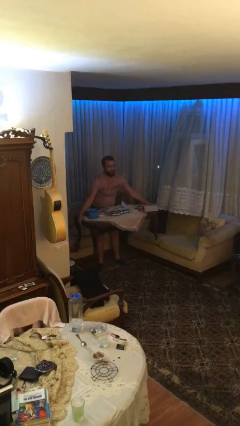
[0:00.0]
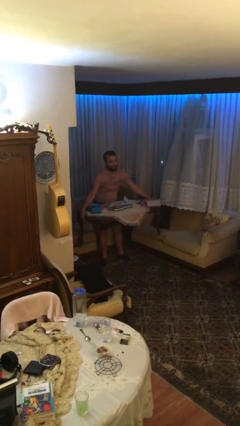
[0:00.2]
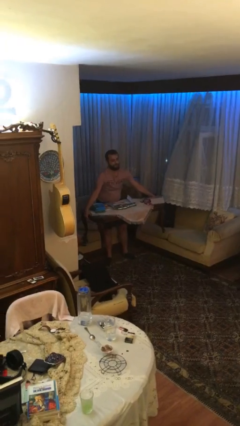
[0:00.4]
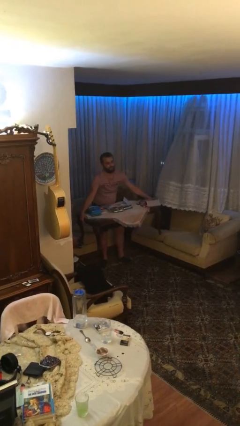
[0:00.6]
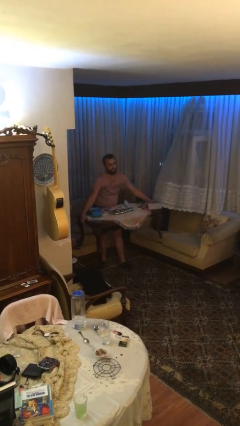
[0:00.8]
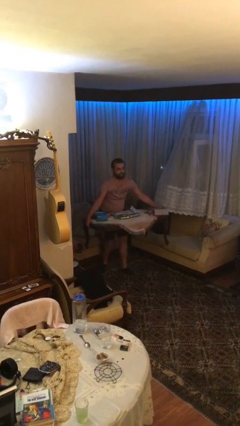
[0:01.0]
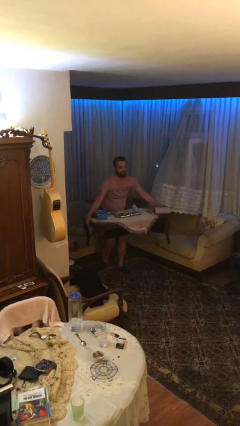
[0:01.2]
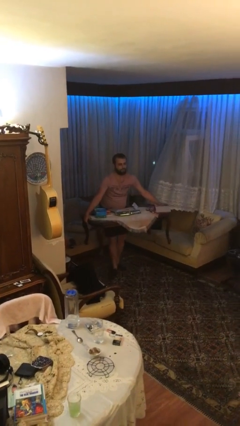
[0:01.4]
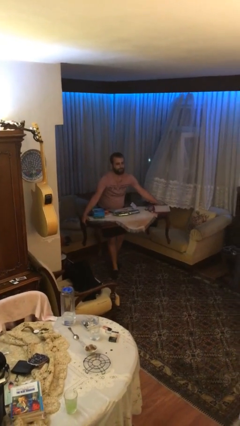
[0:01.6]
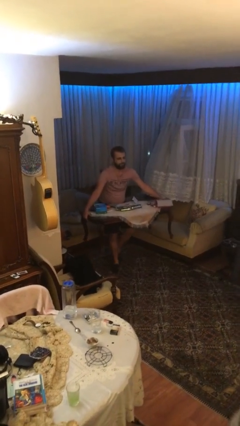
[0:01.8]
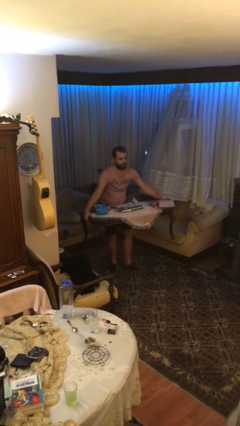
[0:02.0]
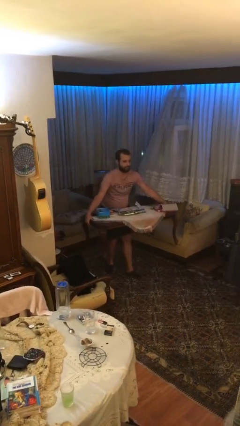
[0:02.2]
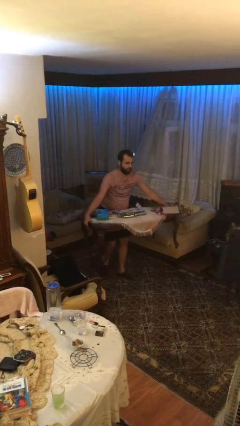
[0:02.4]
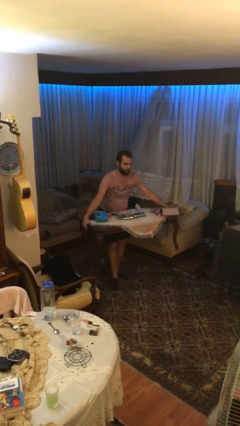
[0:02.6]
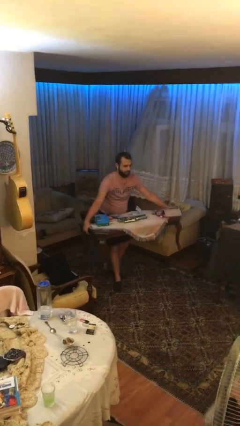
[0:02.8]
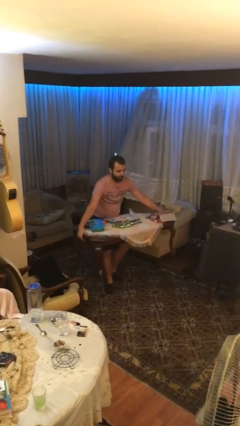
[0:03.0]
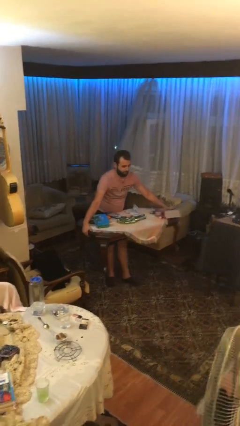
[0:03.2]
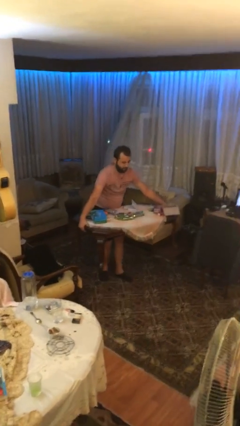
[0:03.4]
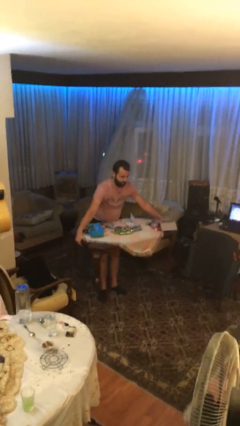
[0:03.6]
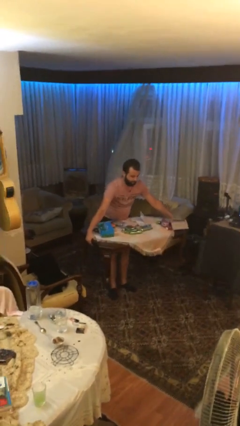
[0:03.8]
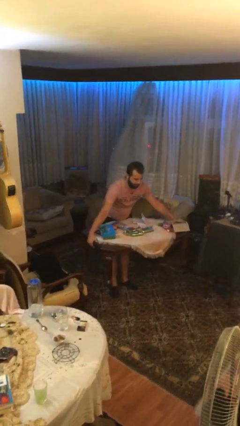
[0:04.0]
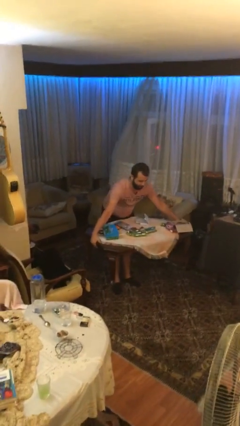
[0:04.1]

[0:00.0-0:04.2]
person carries heavy object

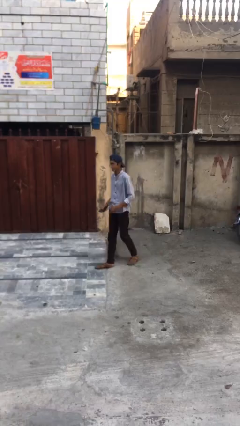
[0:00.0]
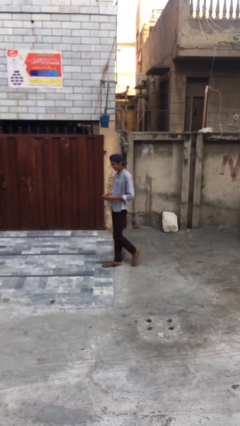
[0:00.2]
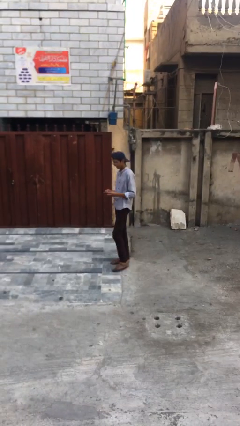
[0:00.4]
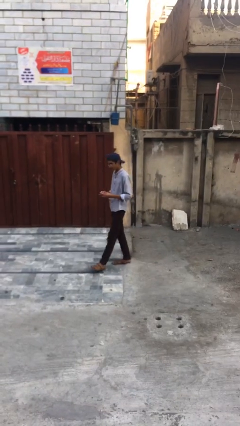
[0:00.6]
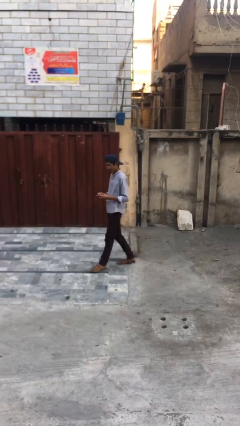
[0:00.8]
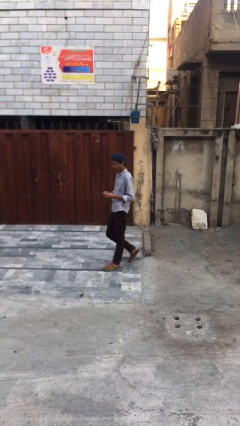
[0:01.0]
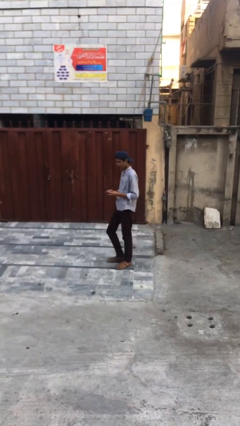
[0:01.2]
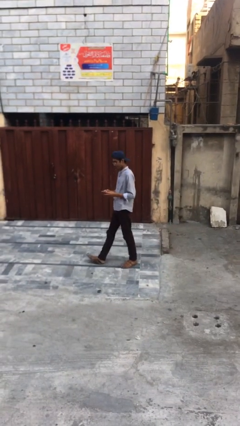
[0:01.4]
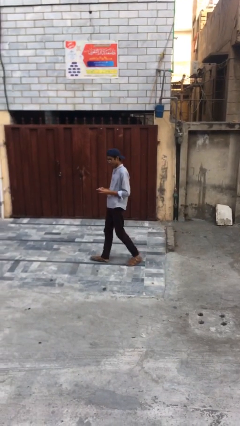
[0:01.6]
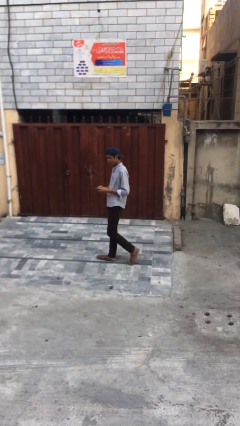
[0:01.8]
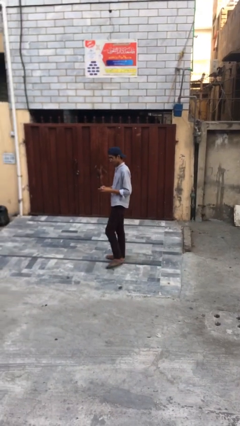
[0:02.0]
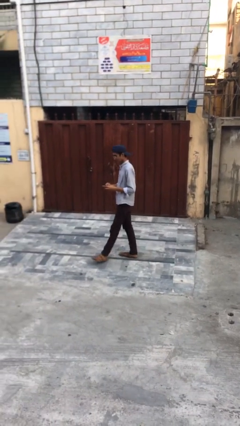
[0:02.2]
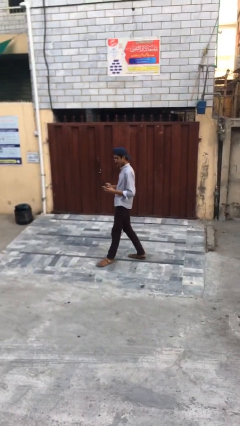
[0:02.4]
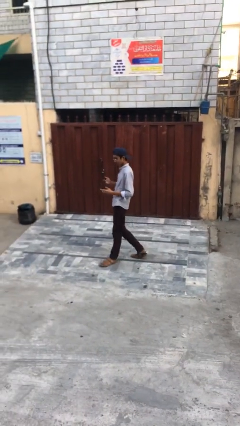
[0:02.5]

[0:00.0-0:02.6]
person texts on phone

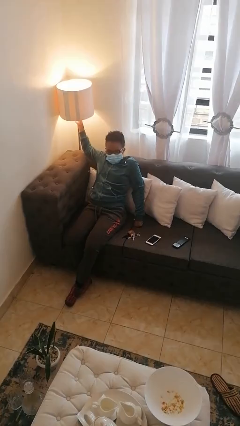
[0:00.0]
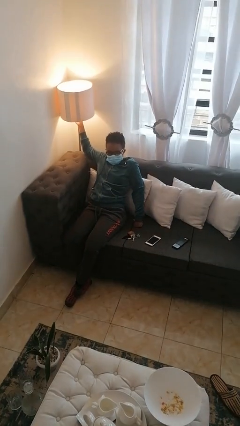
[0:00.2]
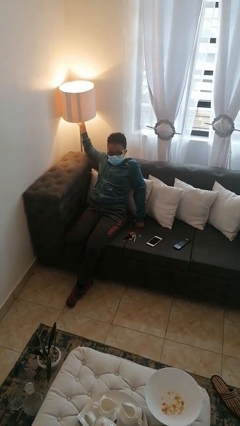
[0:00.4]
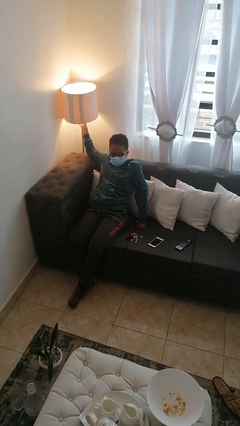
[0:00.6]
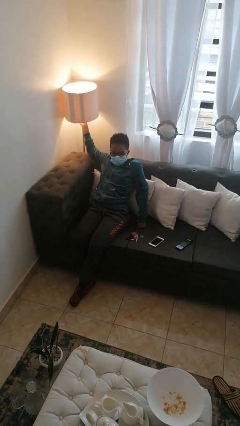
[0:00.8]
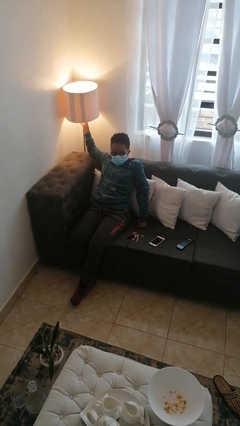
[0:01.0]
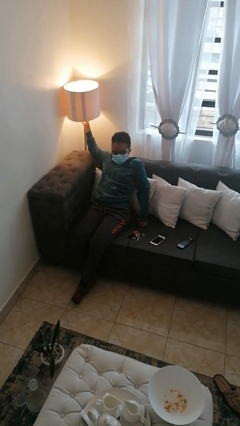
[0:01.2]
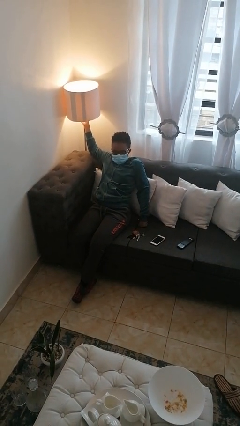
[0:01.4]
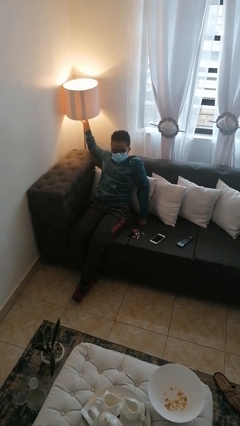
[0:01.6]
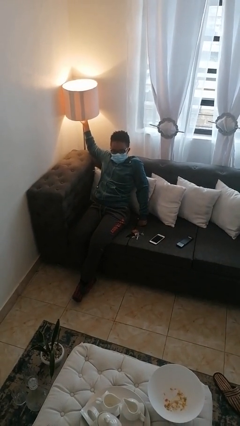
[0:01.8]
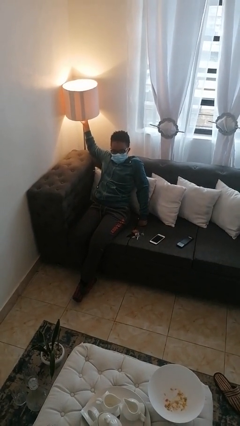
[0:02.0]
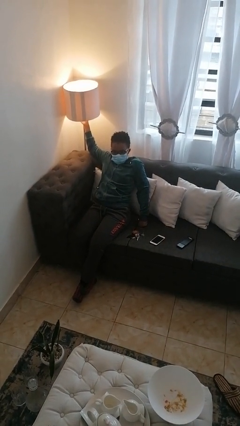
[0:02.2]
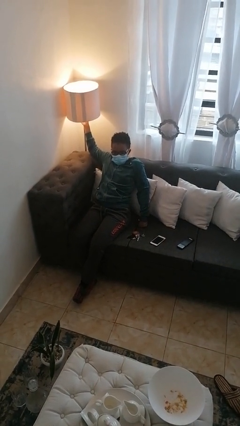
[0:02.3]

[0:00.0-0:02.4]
person turns on lamp

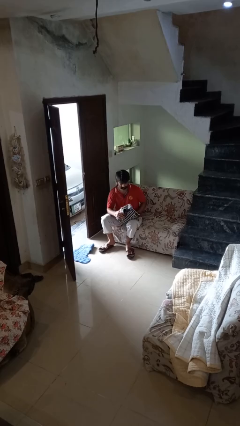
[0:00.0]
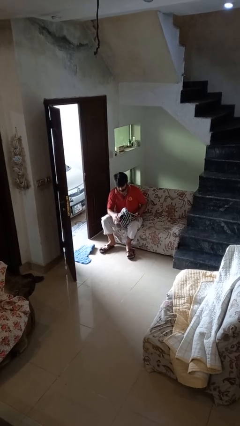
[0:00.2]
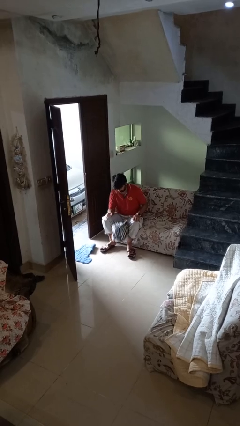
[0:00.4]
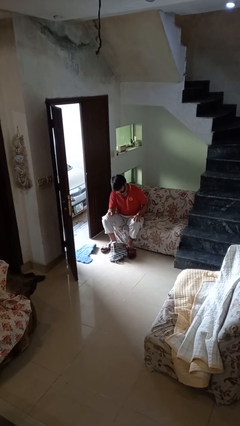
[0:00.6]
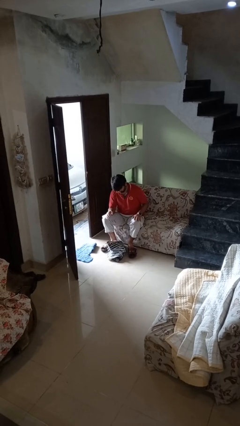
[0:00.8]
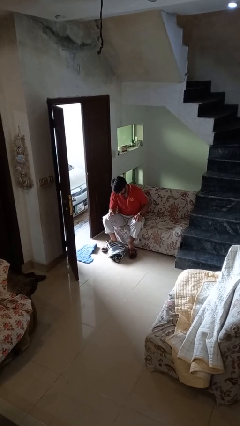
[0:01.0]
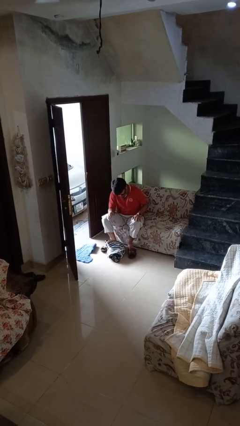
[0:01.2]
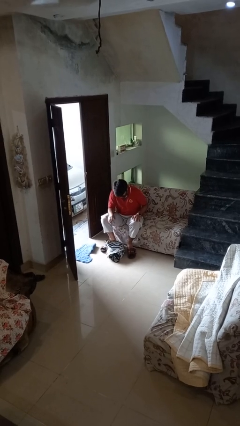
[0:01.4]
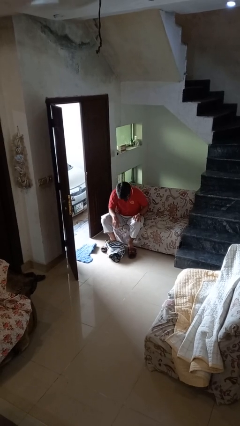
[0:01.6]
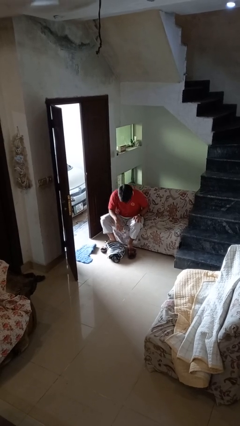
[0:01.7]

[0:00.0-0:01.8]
person drops object

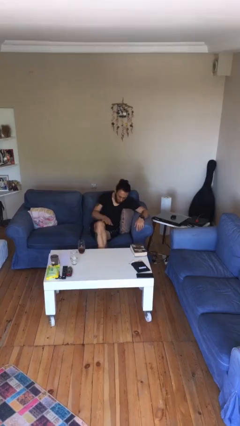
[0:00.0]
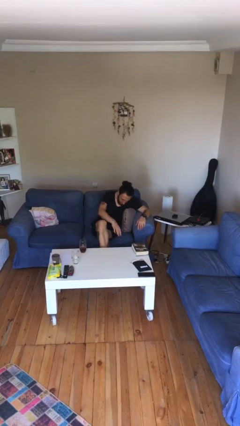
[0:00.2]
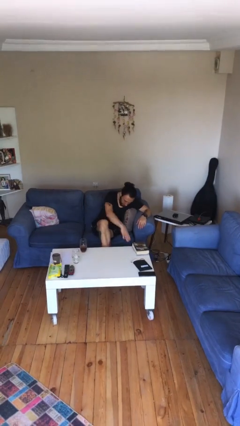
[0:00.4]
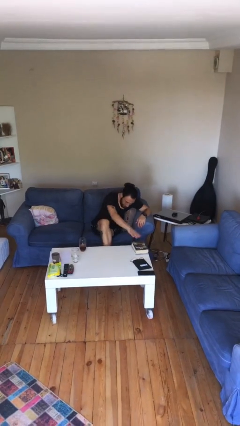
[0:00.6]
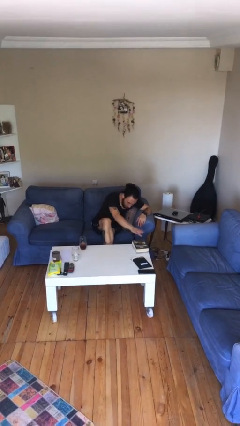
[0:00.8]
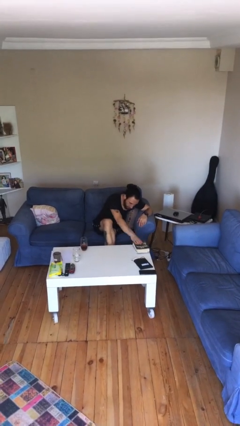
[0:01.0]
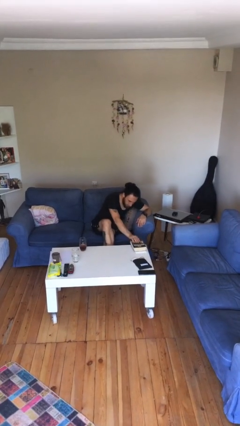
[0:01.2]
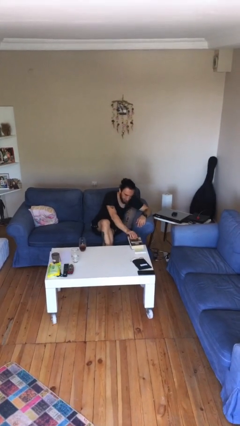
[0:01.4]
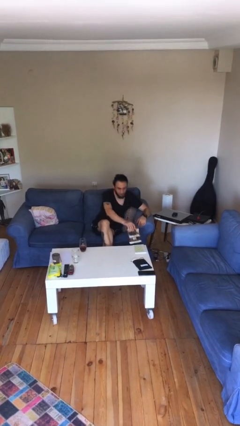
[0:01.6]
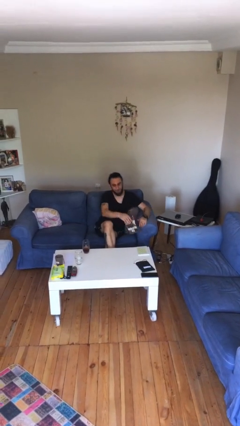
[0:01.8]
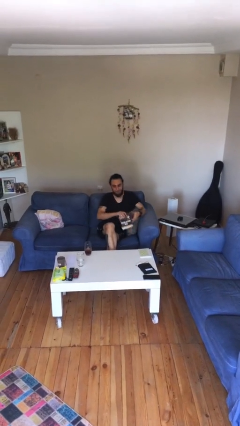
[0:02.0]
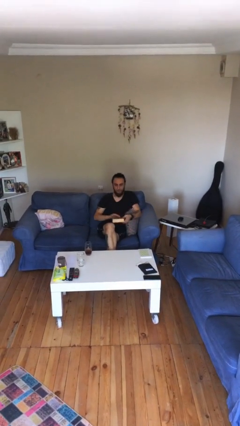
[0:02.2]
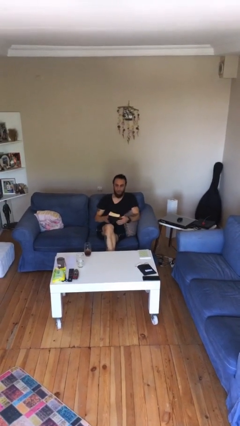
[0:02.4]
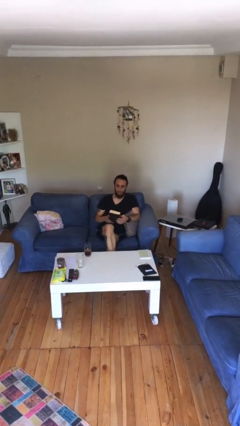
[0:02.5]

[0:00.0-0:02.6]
person picks up object from table

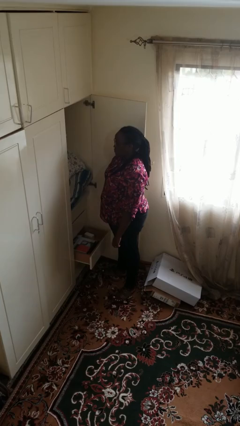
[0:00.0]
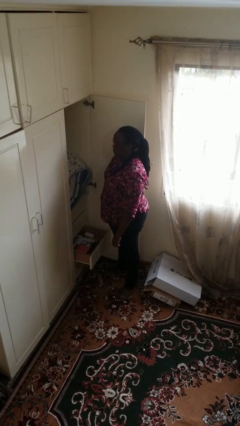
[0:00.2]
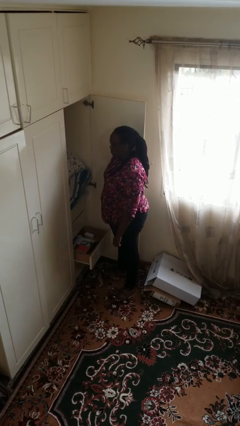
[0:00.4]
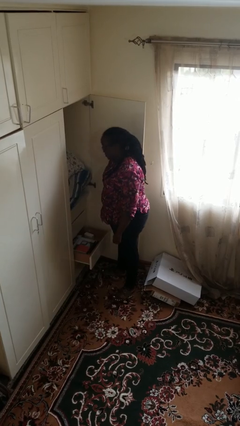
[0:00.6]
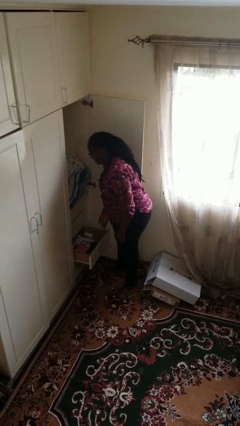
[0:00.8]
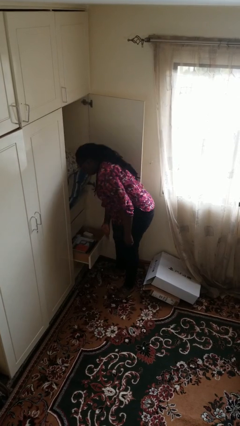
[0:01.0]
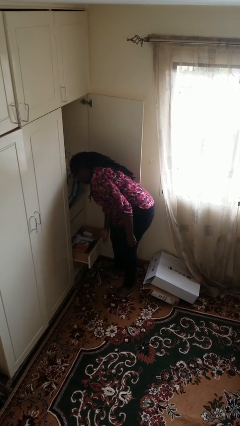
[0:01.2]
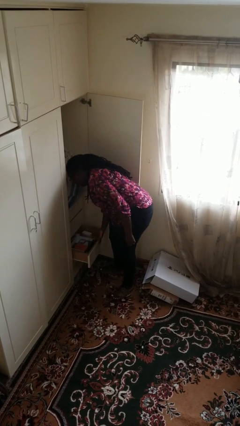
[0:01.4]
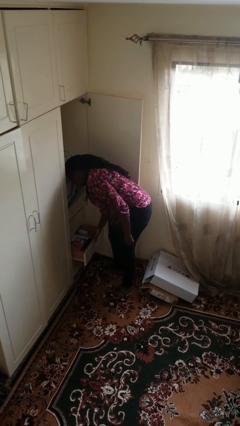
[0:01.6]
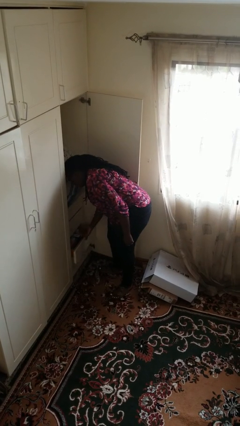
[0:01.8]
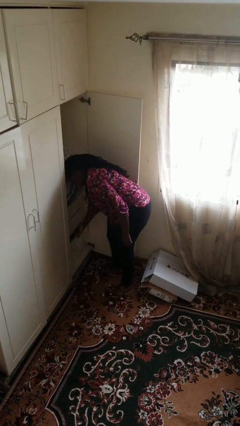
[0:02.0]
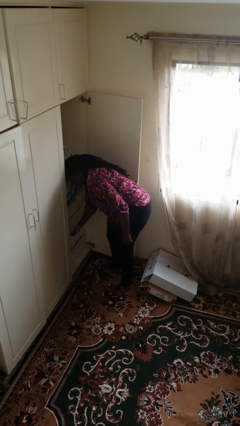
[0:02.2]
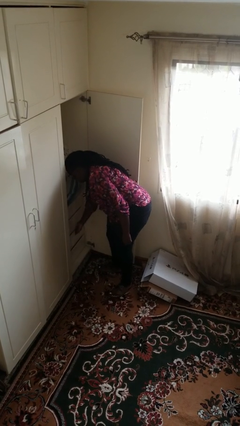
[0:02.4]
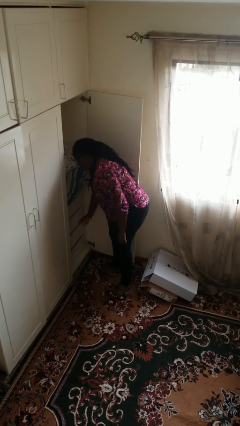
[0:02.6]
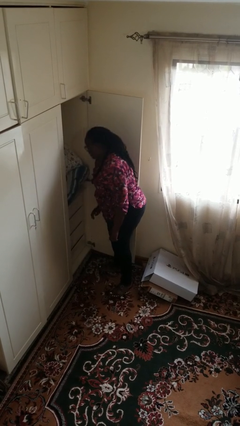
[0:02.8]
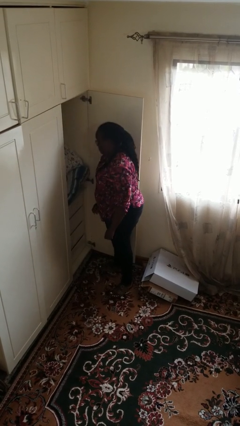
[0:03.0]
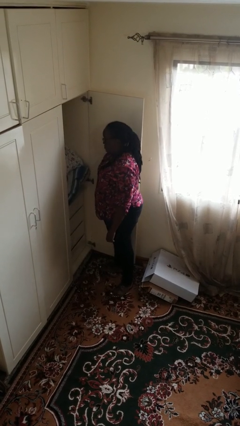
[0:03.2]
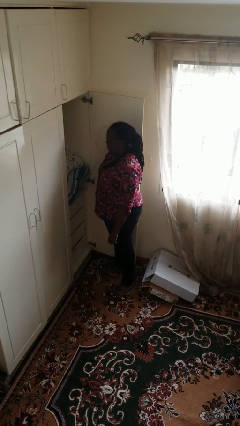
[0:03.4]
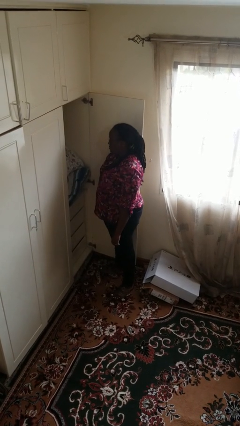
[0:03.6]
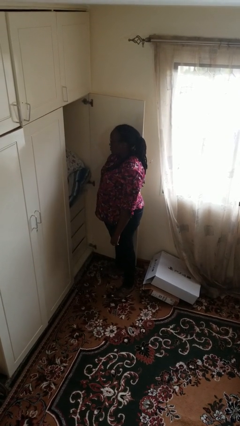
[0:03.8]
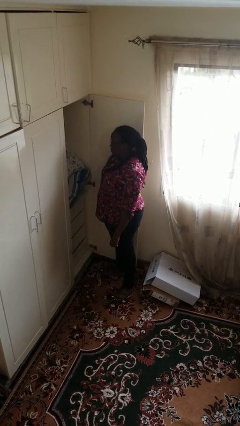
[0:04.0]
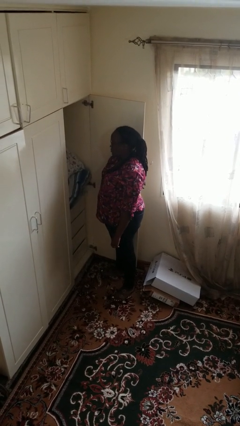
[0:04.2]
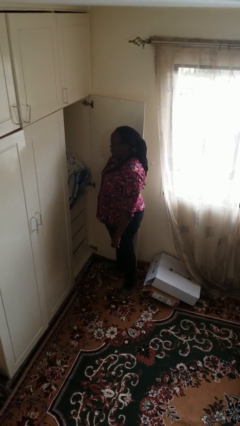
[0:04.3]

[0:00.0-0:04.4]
person closes dresser drawer
